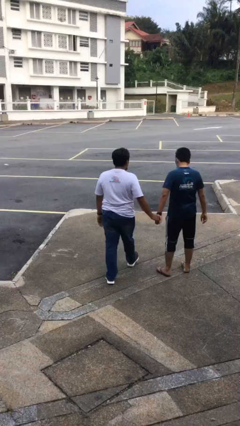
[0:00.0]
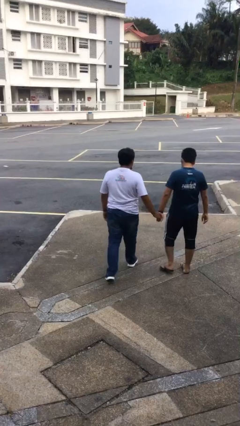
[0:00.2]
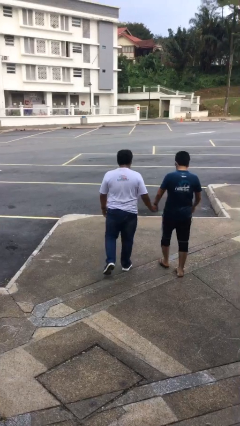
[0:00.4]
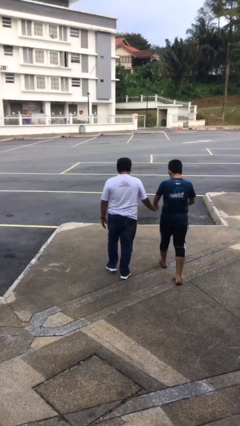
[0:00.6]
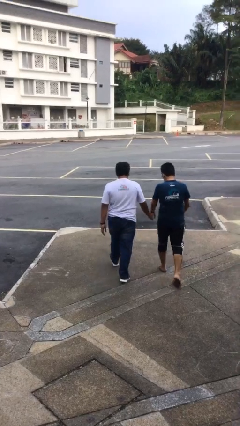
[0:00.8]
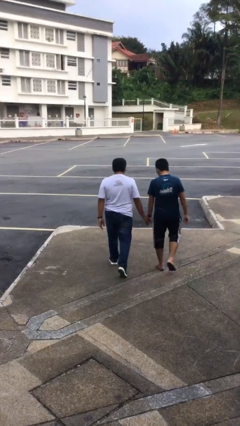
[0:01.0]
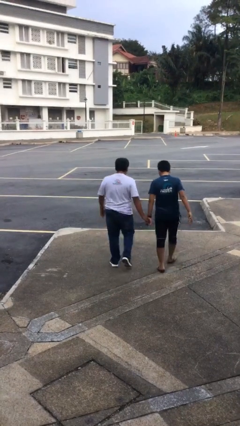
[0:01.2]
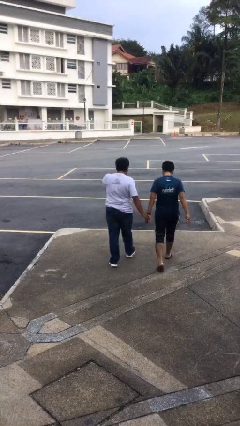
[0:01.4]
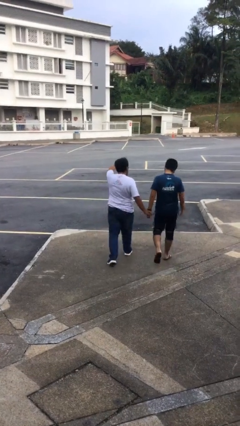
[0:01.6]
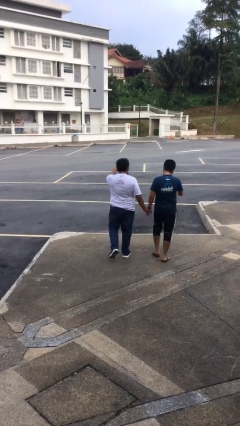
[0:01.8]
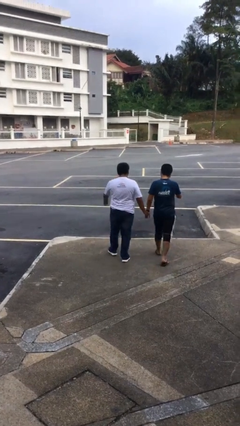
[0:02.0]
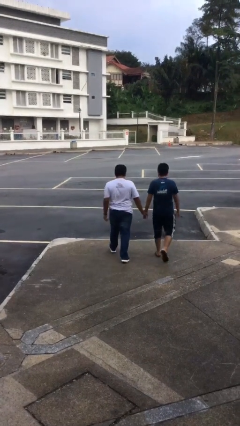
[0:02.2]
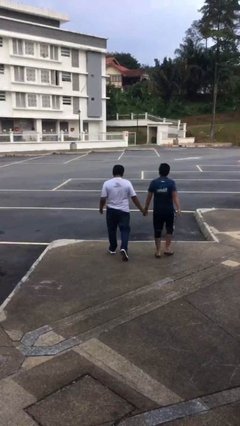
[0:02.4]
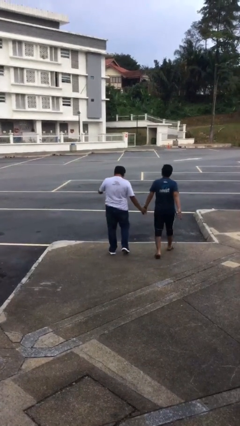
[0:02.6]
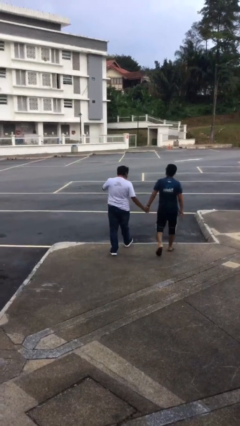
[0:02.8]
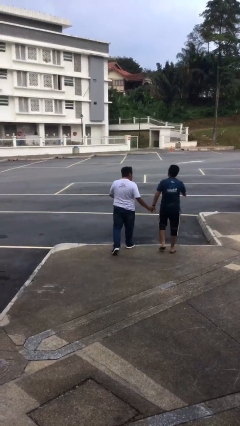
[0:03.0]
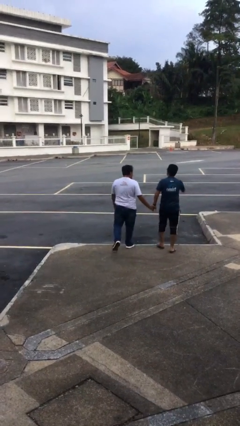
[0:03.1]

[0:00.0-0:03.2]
person holds hand

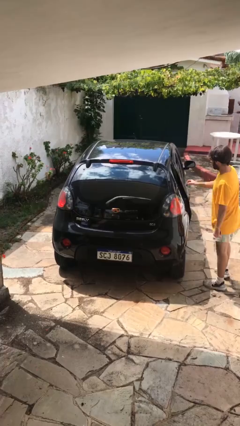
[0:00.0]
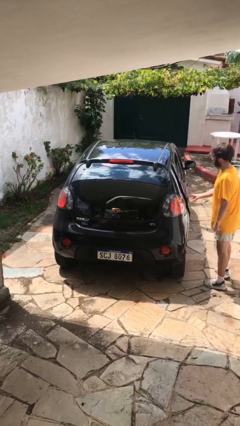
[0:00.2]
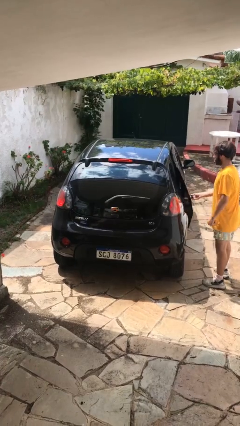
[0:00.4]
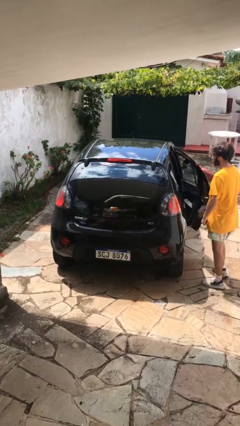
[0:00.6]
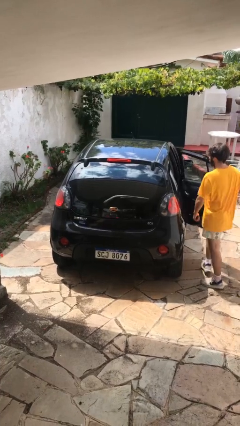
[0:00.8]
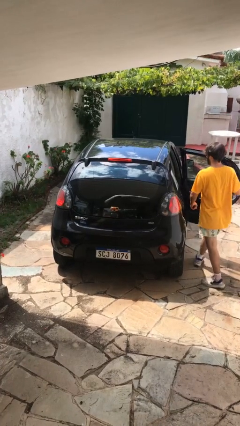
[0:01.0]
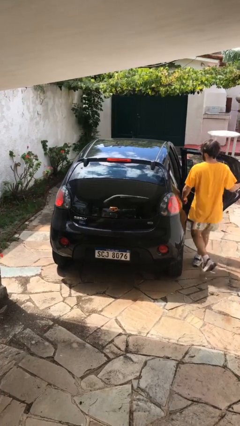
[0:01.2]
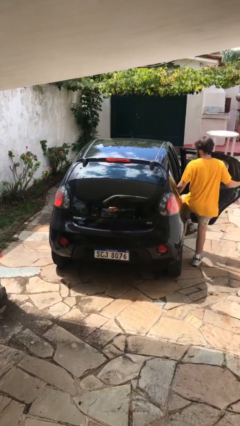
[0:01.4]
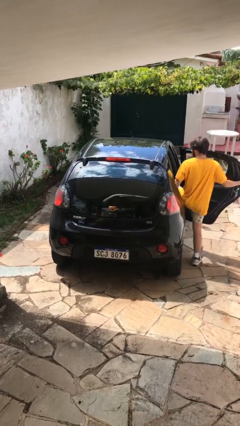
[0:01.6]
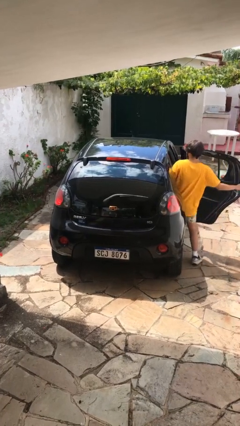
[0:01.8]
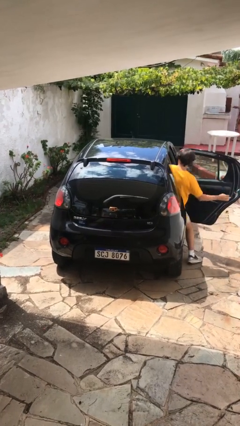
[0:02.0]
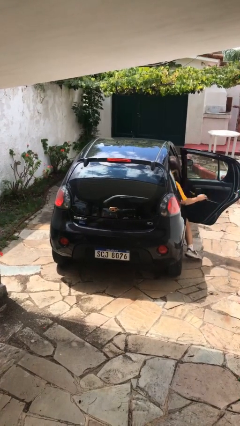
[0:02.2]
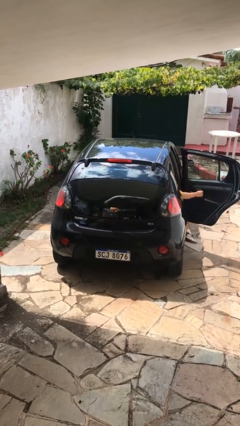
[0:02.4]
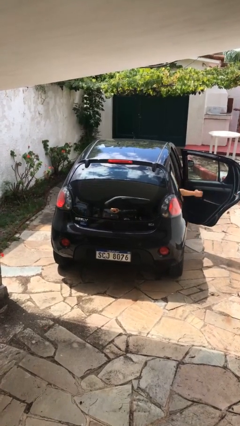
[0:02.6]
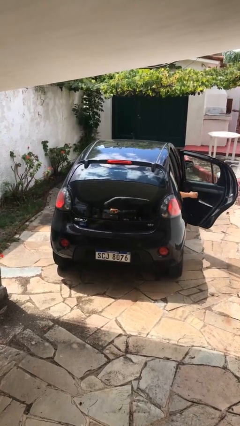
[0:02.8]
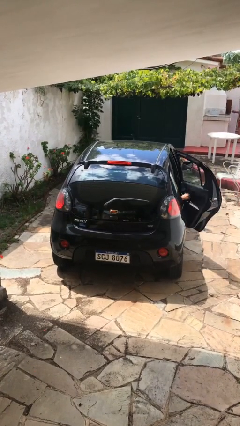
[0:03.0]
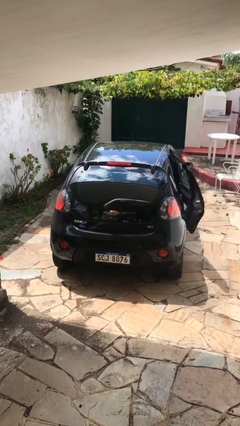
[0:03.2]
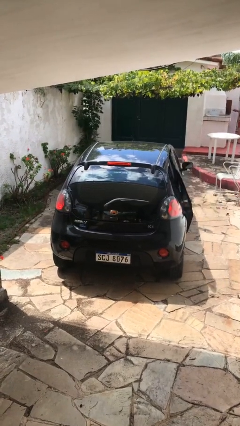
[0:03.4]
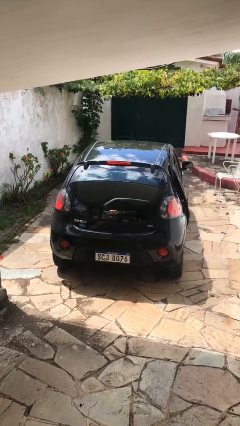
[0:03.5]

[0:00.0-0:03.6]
car picks up person

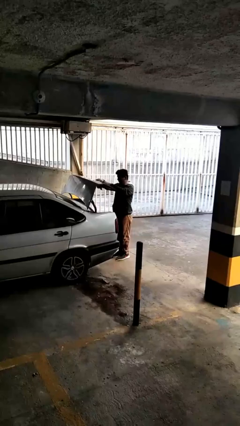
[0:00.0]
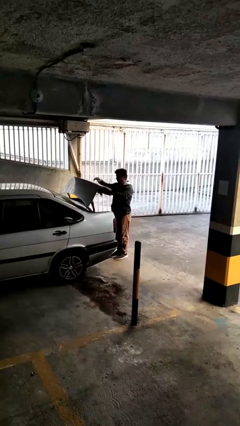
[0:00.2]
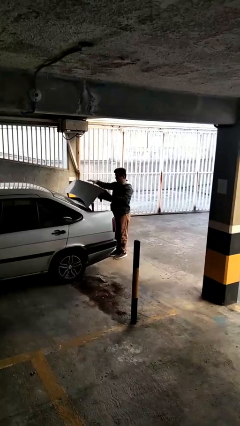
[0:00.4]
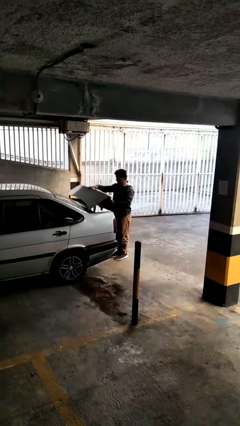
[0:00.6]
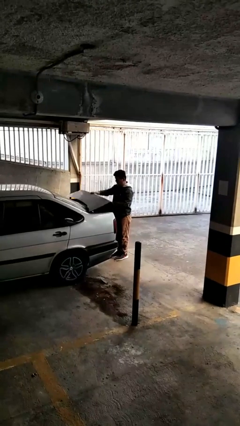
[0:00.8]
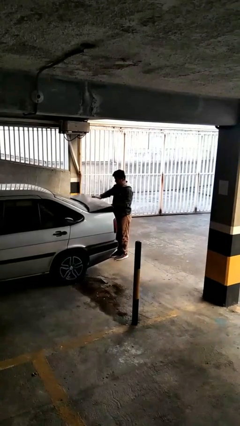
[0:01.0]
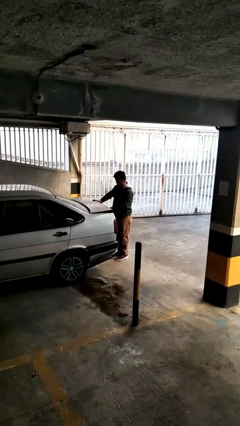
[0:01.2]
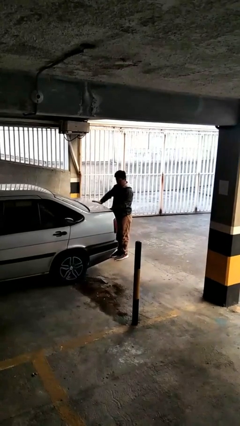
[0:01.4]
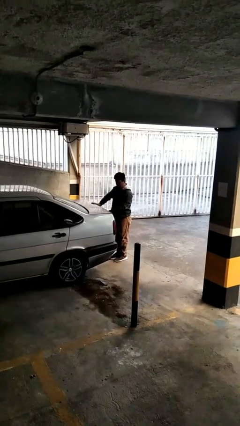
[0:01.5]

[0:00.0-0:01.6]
person closes car trunk

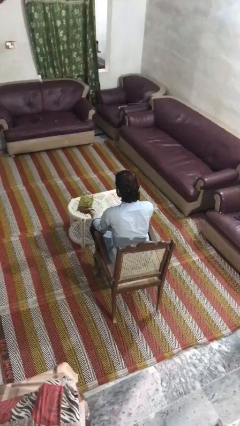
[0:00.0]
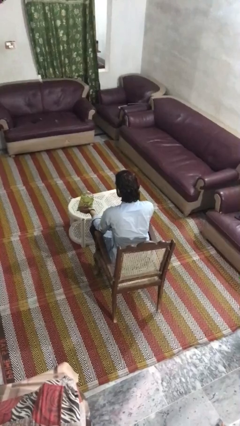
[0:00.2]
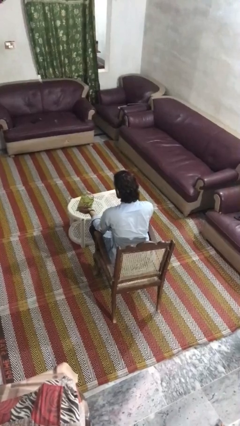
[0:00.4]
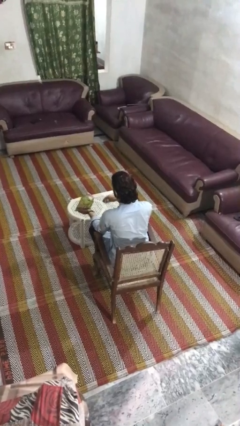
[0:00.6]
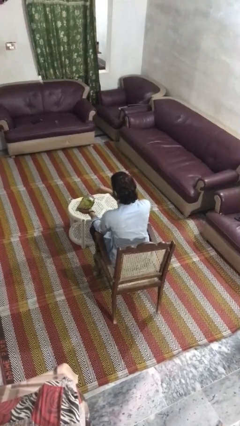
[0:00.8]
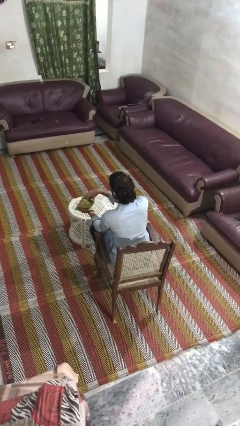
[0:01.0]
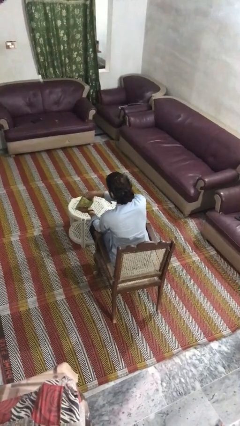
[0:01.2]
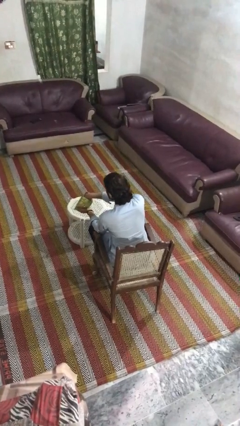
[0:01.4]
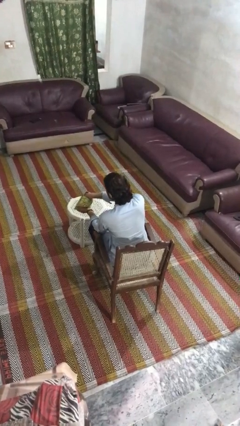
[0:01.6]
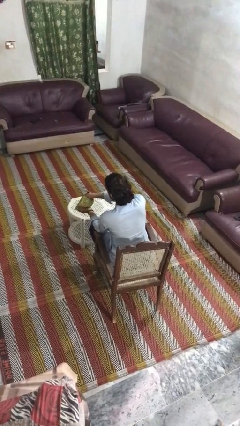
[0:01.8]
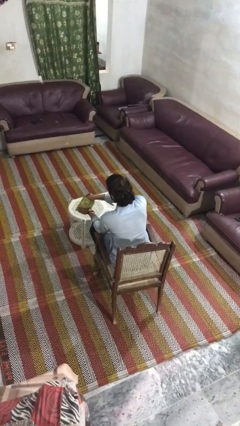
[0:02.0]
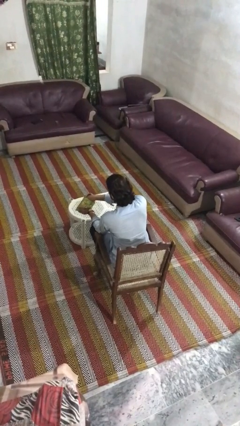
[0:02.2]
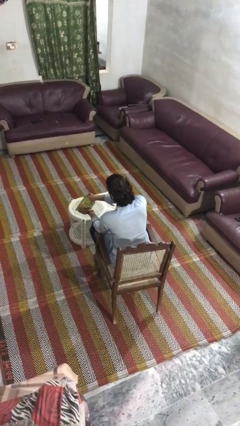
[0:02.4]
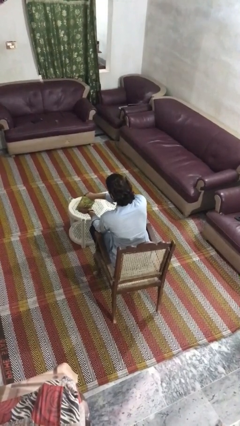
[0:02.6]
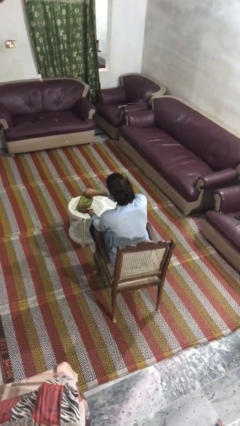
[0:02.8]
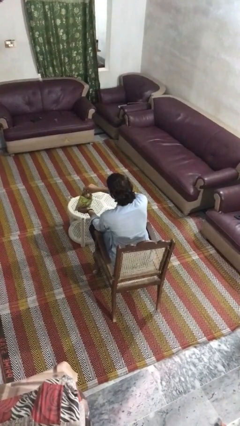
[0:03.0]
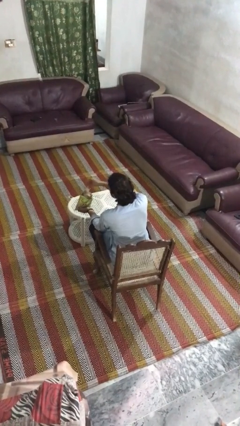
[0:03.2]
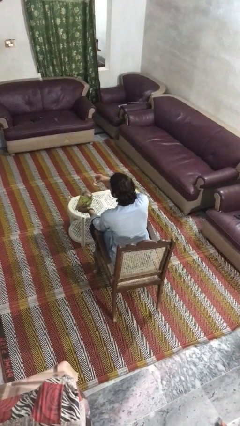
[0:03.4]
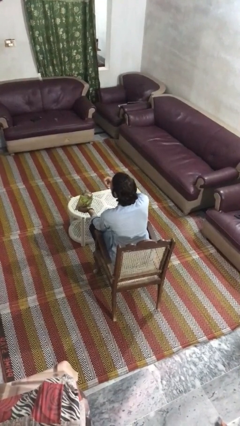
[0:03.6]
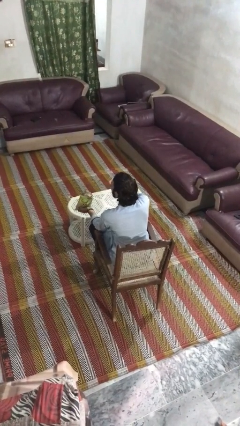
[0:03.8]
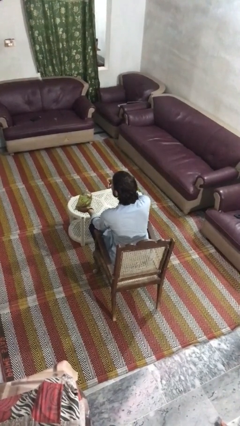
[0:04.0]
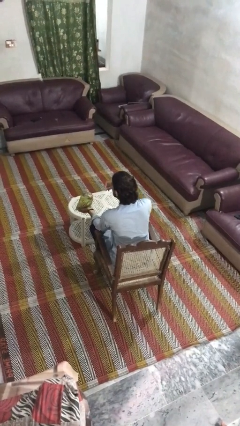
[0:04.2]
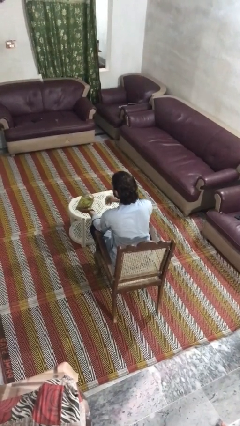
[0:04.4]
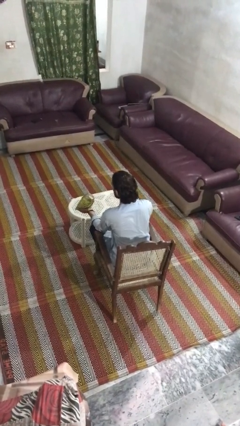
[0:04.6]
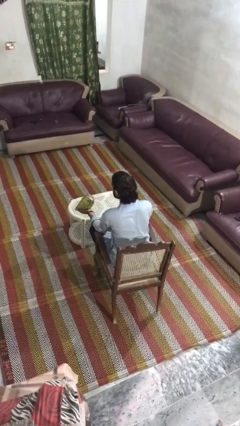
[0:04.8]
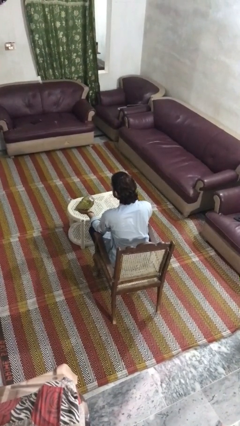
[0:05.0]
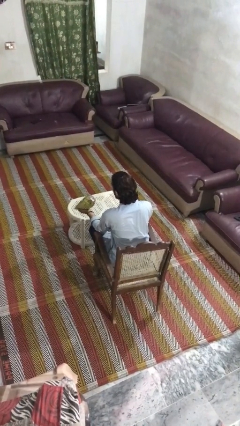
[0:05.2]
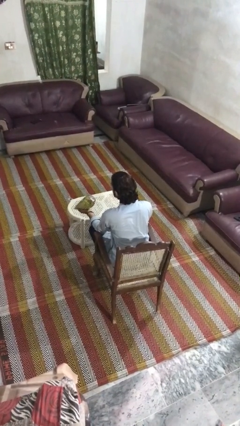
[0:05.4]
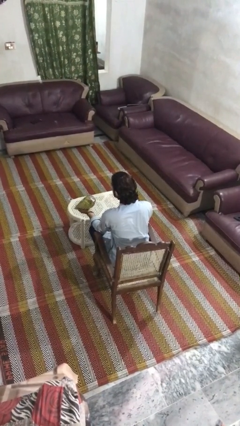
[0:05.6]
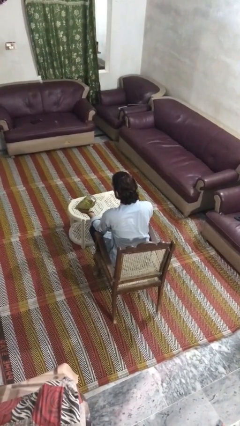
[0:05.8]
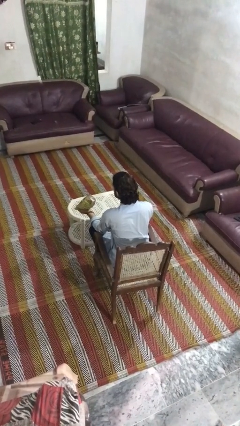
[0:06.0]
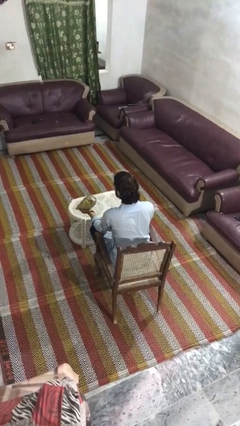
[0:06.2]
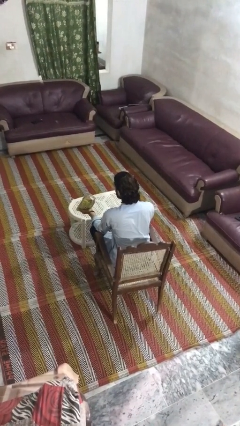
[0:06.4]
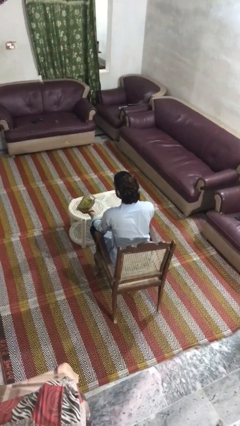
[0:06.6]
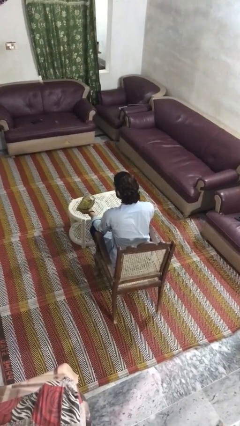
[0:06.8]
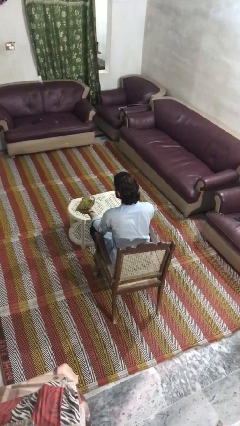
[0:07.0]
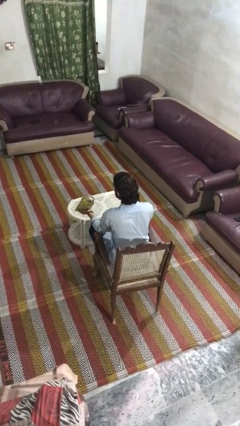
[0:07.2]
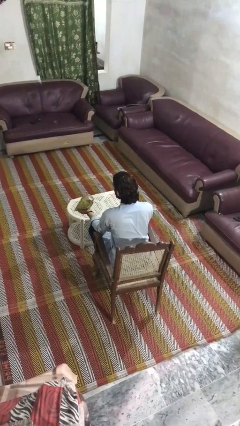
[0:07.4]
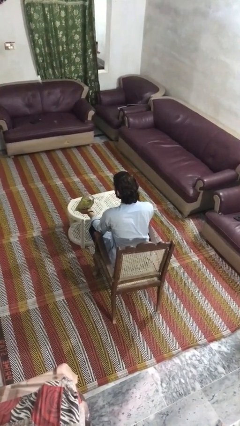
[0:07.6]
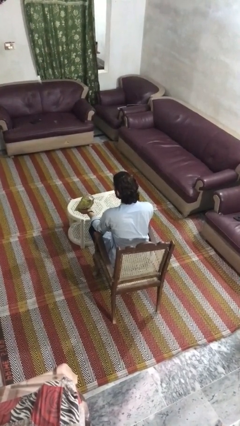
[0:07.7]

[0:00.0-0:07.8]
person eats snack from bag

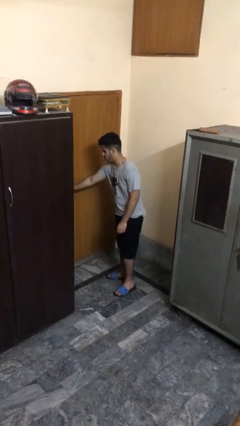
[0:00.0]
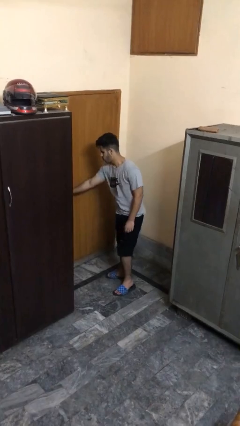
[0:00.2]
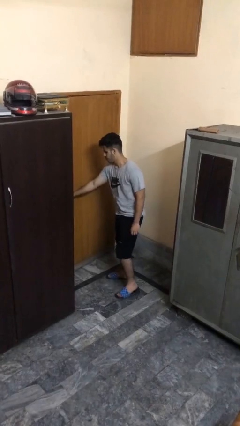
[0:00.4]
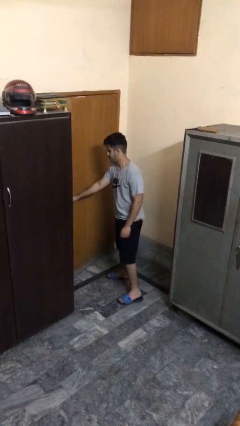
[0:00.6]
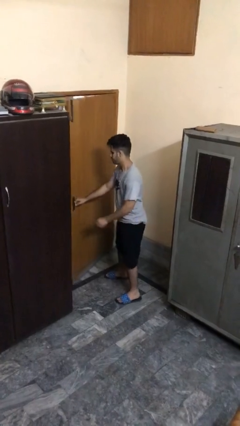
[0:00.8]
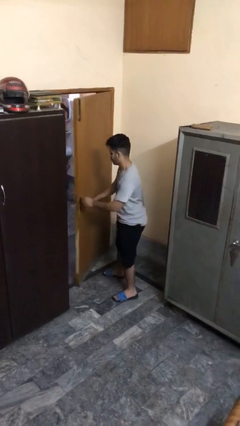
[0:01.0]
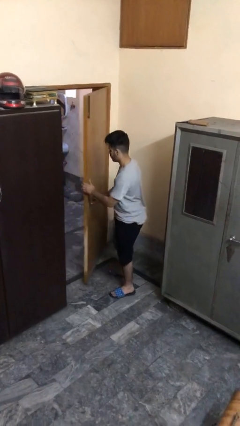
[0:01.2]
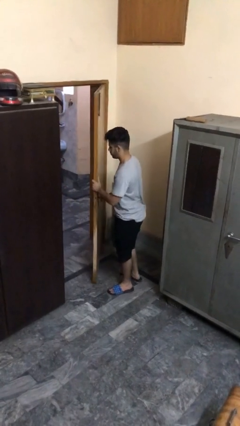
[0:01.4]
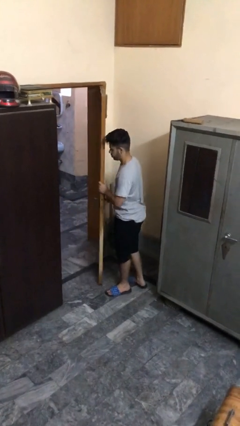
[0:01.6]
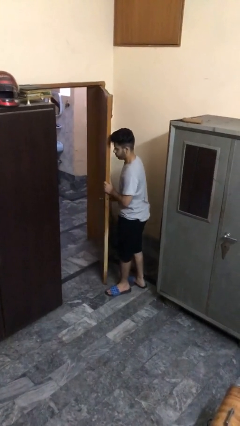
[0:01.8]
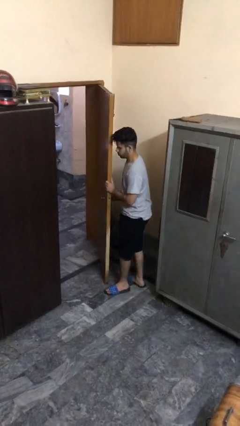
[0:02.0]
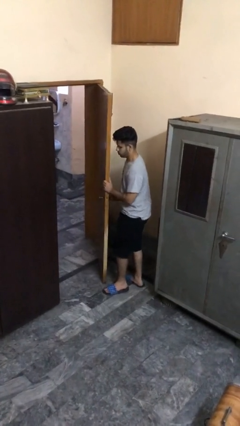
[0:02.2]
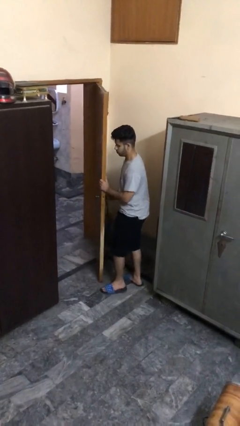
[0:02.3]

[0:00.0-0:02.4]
person opens facility door
